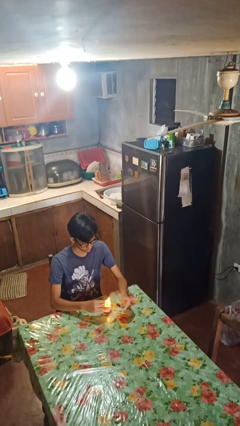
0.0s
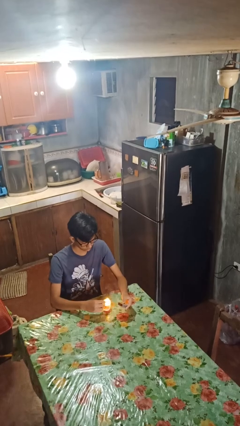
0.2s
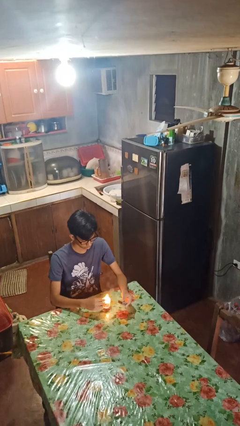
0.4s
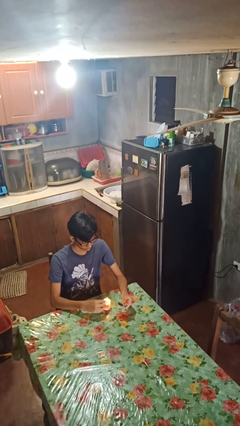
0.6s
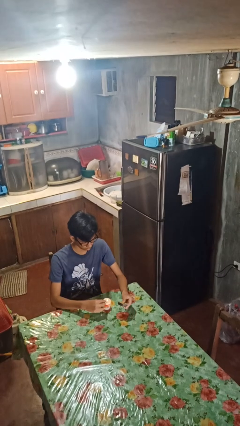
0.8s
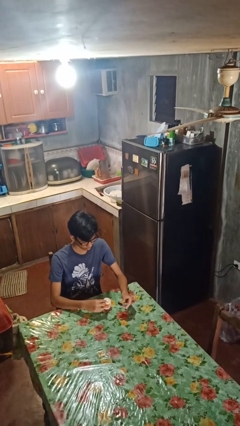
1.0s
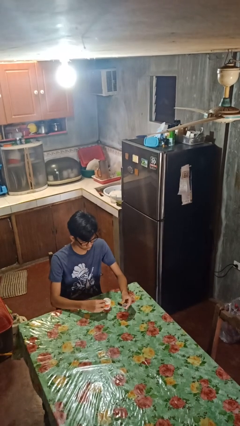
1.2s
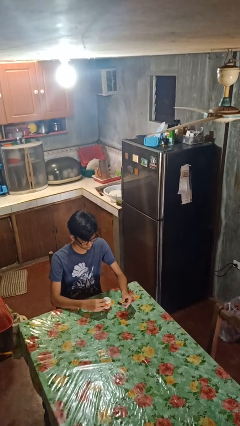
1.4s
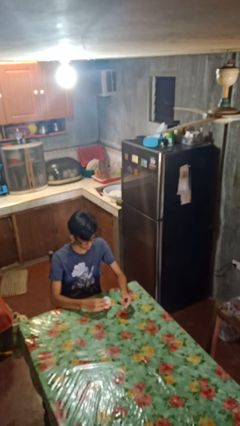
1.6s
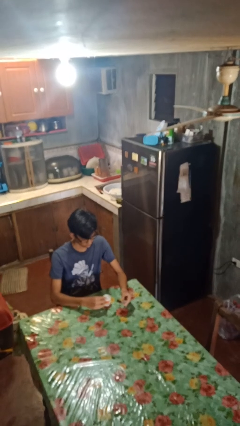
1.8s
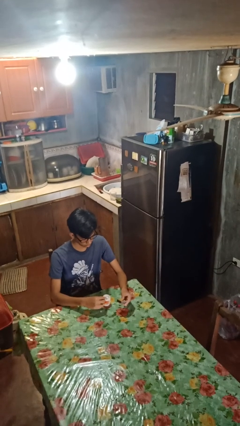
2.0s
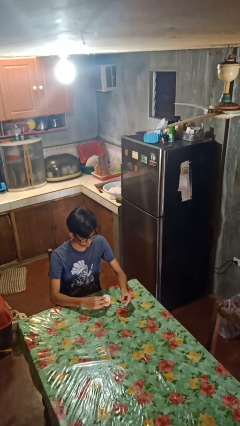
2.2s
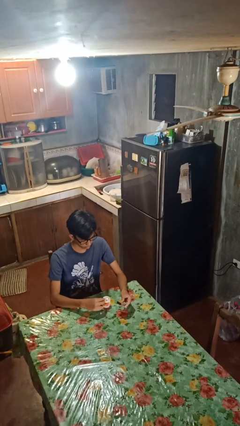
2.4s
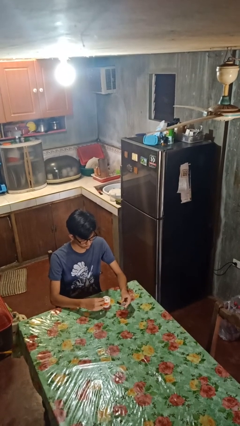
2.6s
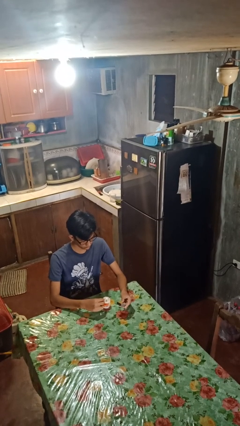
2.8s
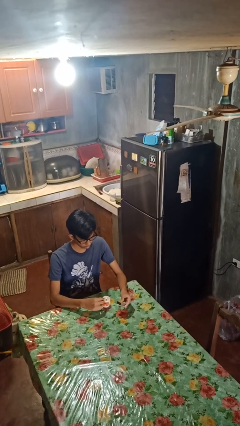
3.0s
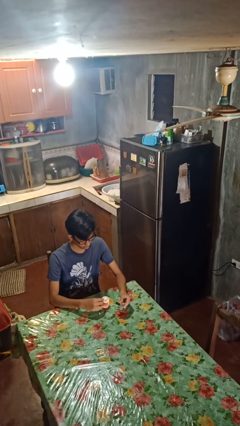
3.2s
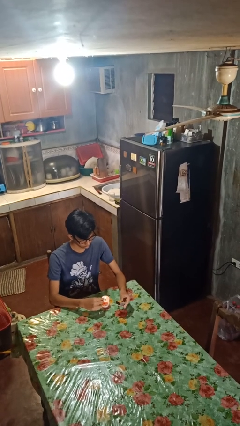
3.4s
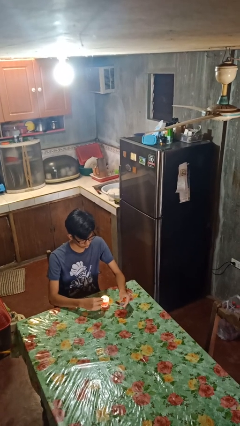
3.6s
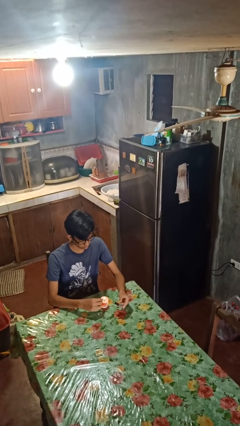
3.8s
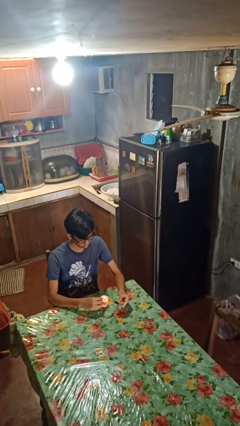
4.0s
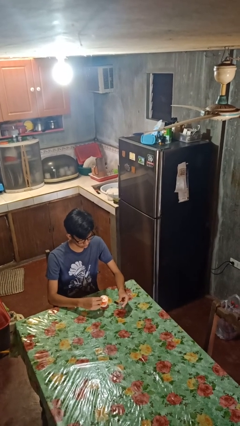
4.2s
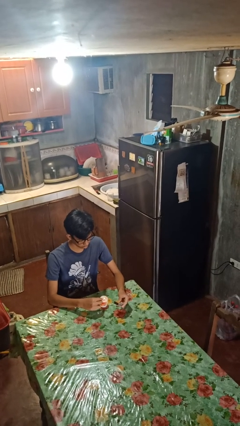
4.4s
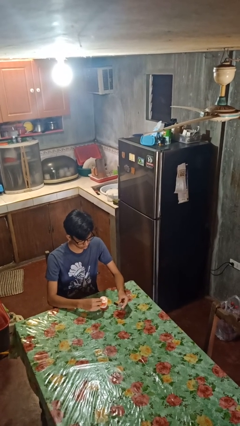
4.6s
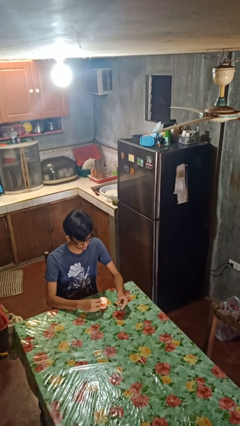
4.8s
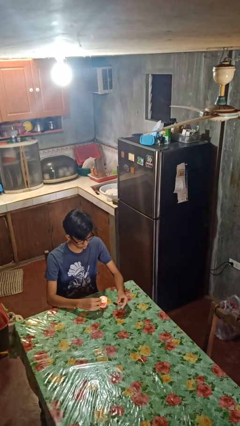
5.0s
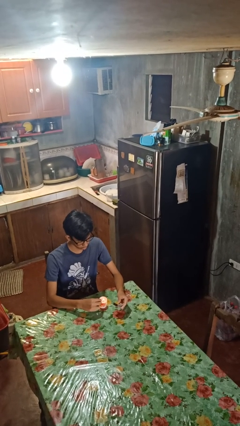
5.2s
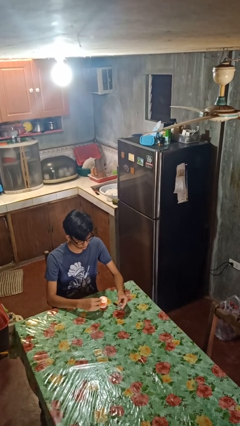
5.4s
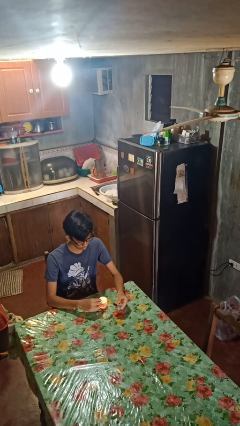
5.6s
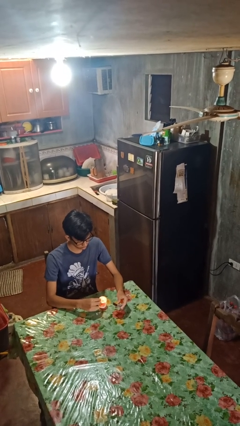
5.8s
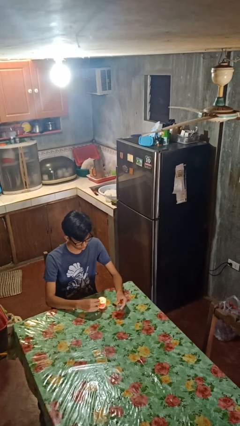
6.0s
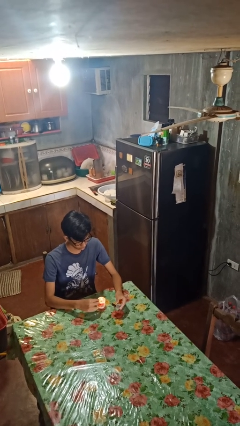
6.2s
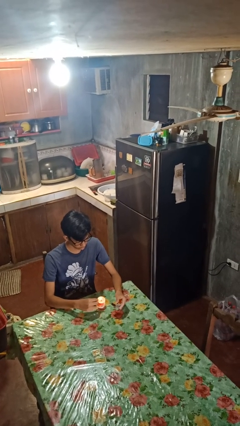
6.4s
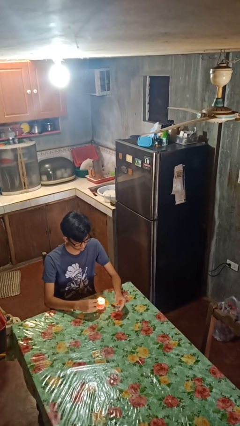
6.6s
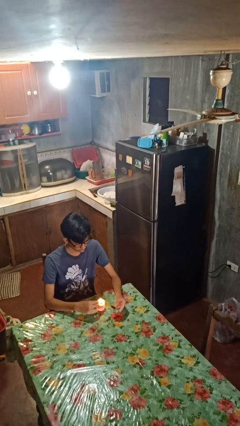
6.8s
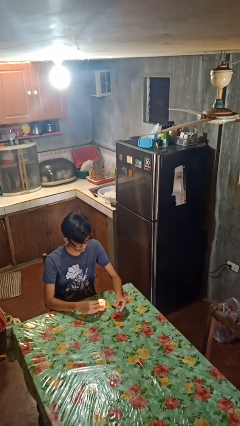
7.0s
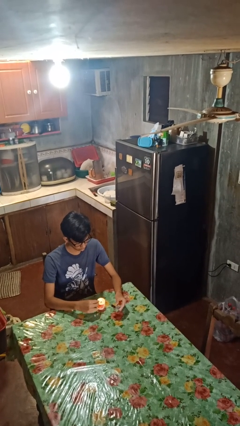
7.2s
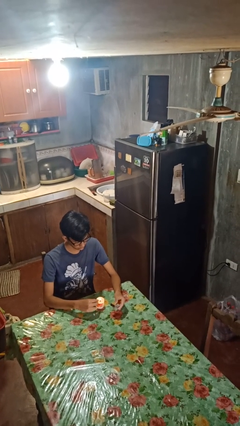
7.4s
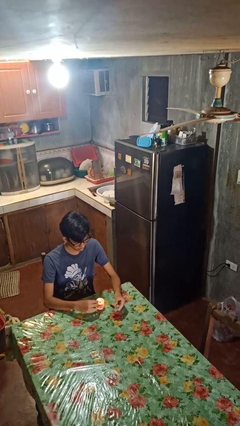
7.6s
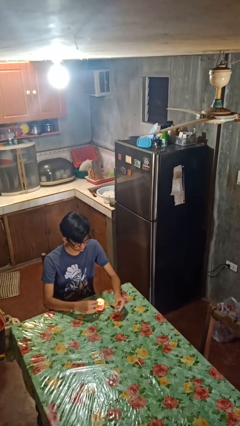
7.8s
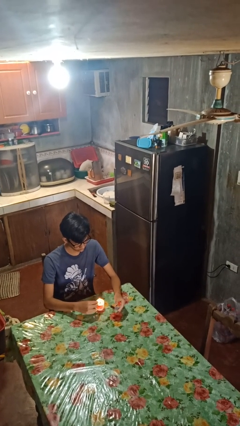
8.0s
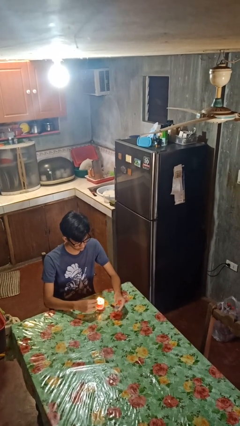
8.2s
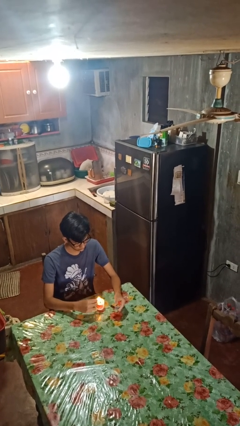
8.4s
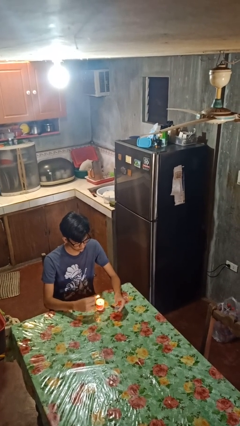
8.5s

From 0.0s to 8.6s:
person lights candle

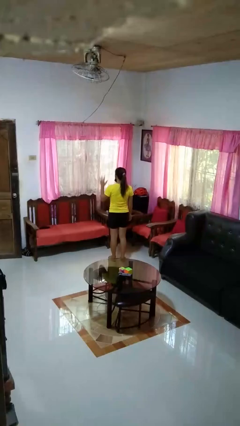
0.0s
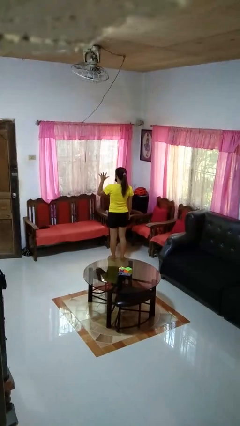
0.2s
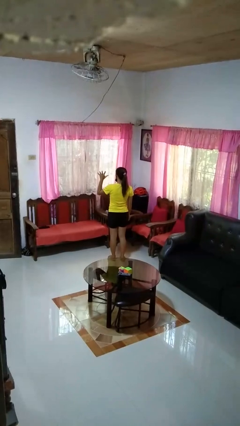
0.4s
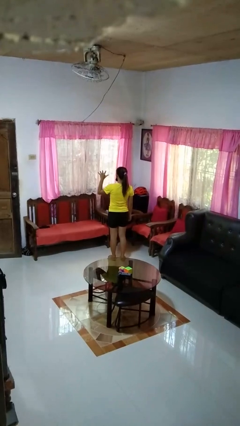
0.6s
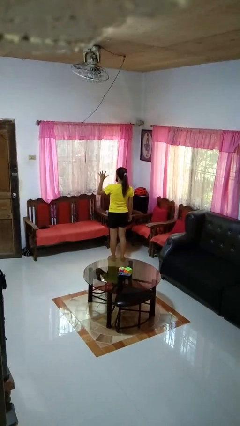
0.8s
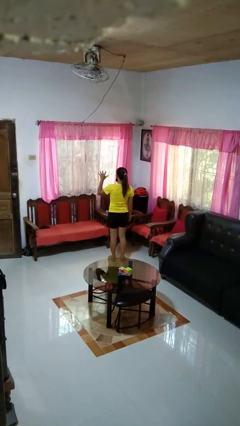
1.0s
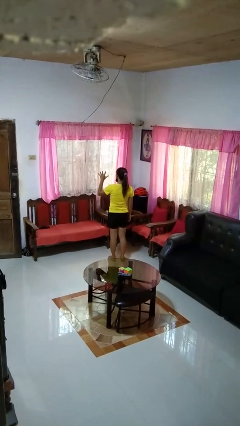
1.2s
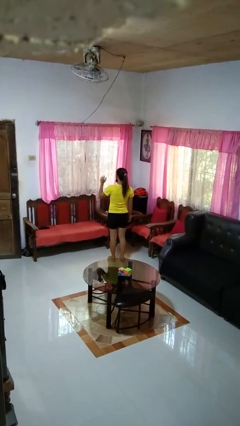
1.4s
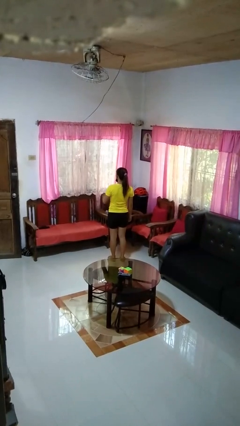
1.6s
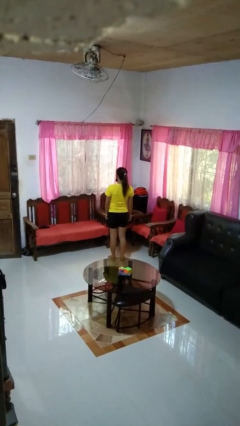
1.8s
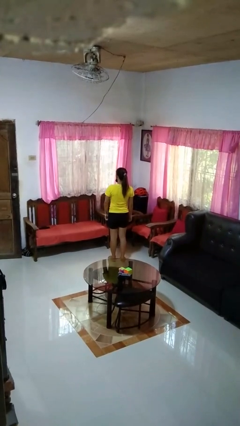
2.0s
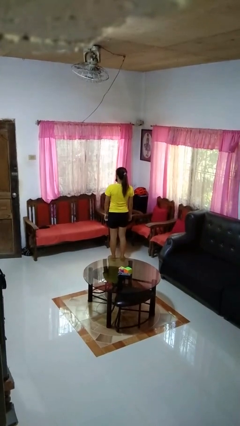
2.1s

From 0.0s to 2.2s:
person gestures number five

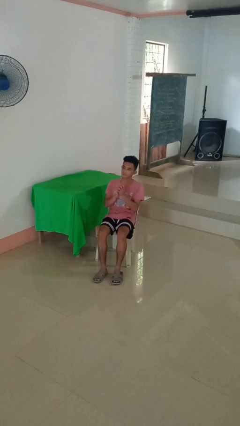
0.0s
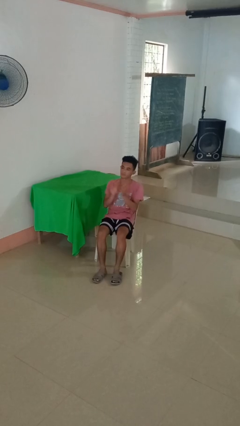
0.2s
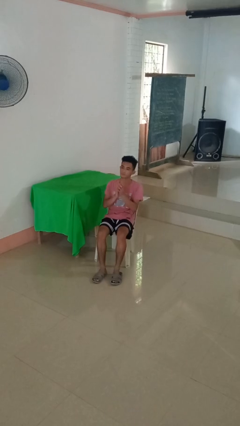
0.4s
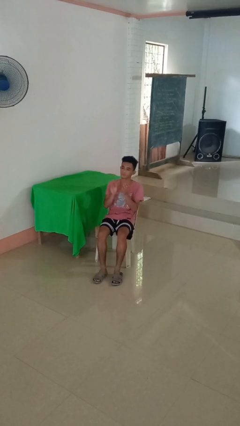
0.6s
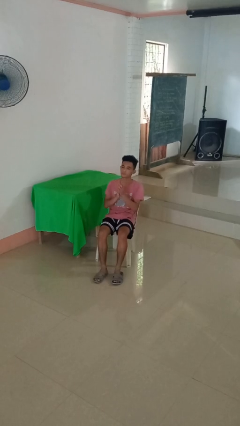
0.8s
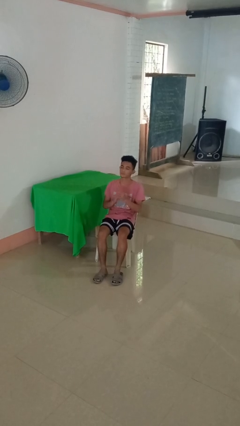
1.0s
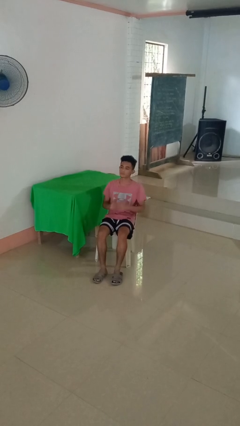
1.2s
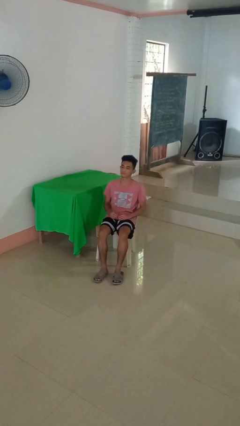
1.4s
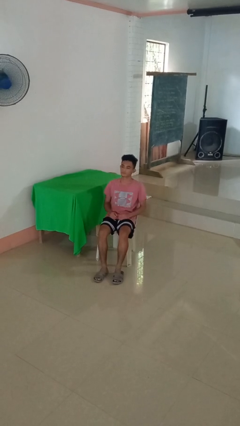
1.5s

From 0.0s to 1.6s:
person claps hands

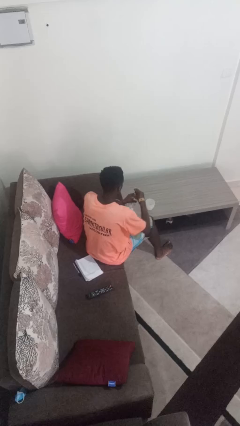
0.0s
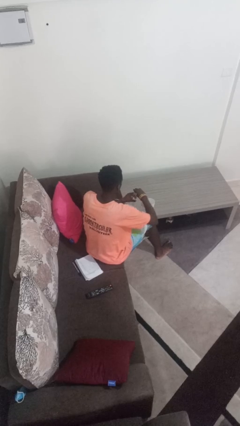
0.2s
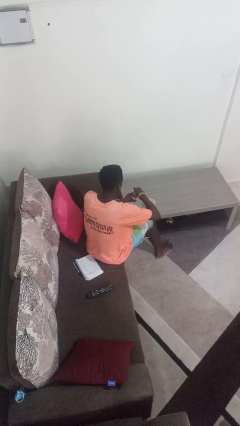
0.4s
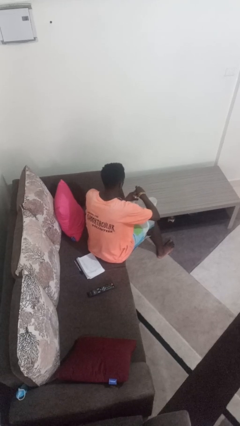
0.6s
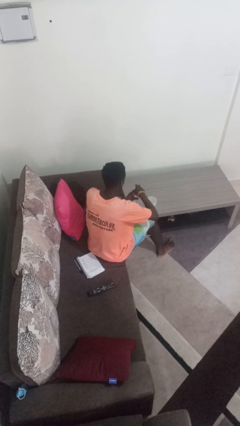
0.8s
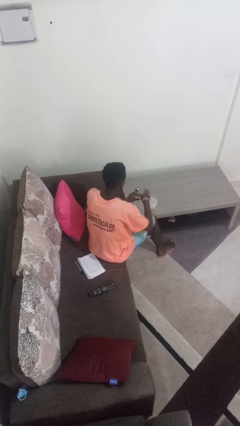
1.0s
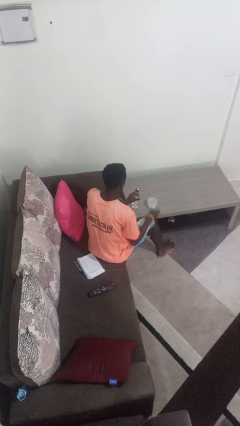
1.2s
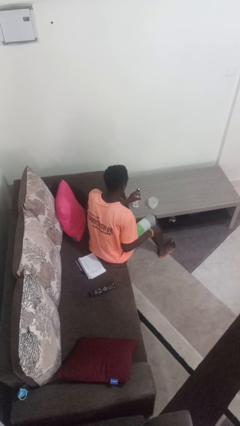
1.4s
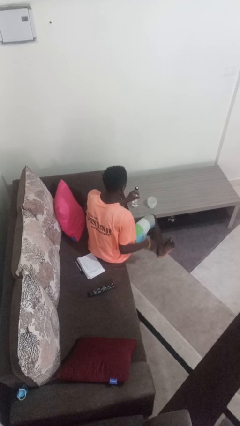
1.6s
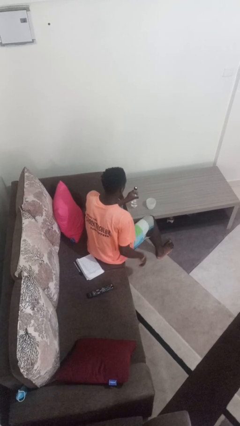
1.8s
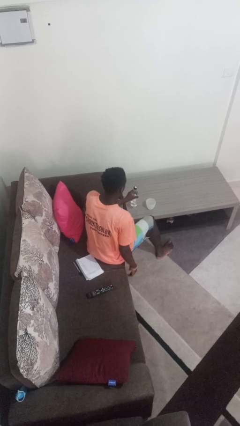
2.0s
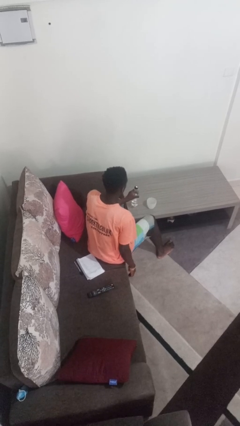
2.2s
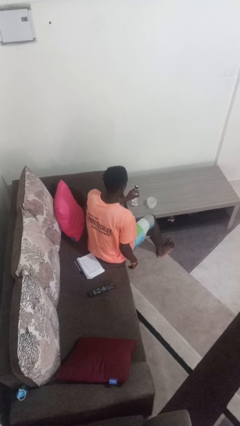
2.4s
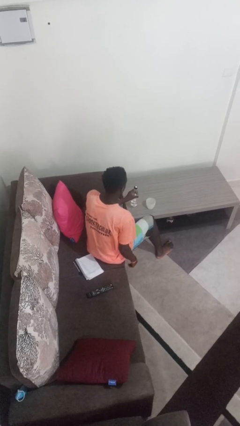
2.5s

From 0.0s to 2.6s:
person screws lid to bottle

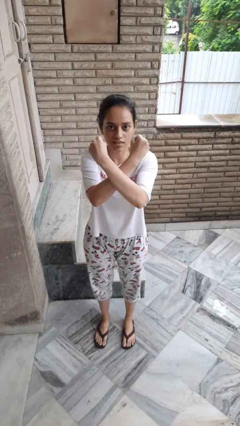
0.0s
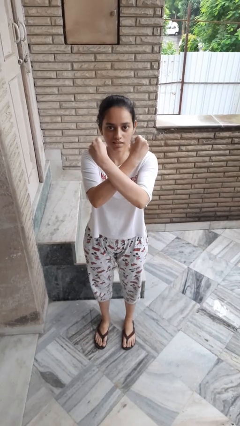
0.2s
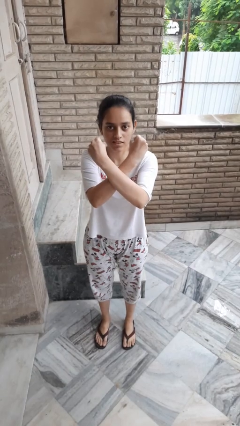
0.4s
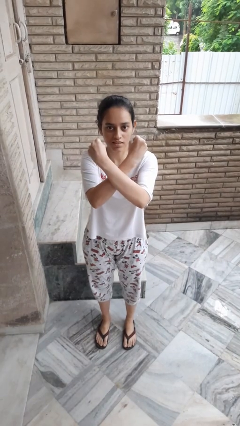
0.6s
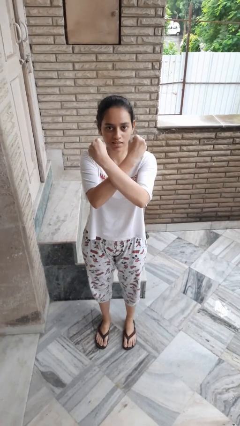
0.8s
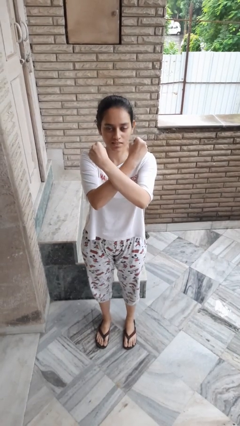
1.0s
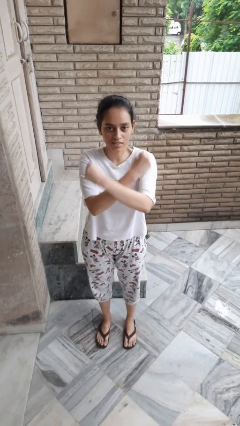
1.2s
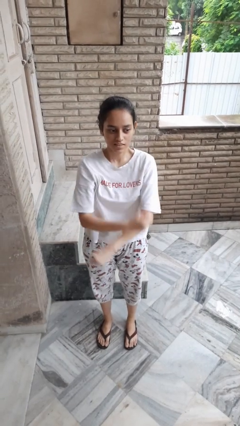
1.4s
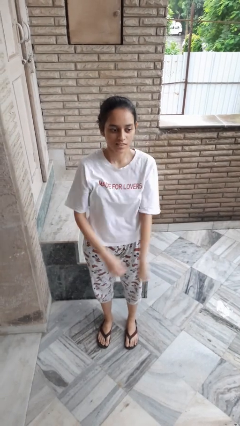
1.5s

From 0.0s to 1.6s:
person gestures arms x

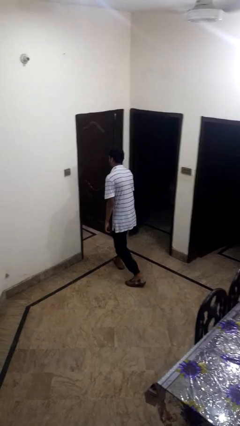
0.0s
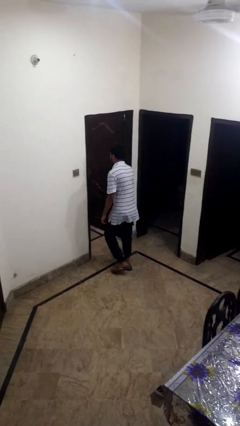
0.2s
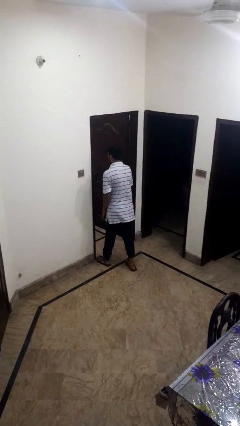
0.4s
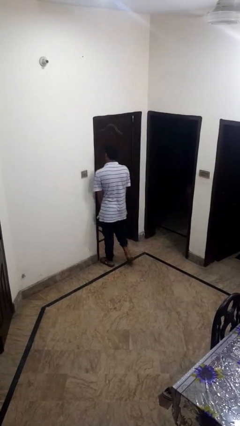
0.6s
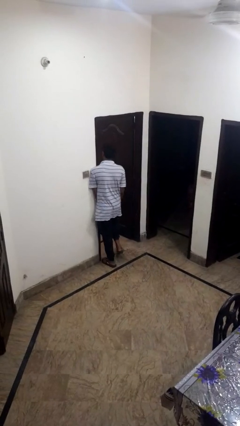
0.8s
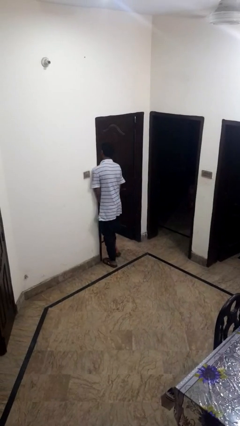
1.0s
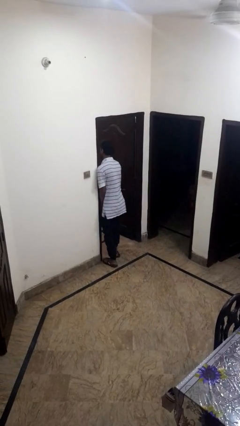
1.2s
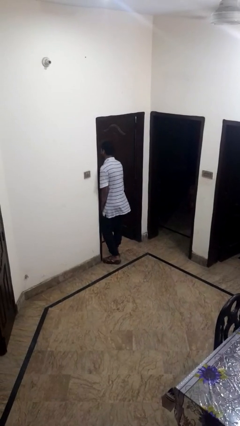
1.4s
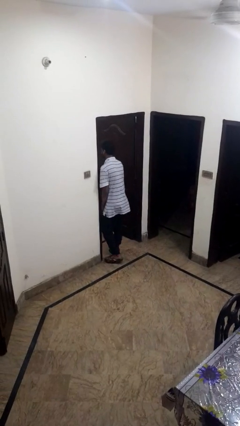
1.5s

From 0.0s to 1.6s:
person bumps into wall
